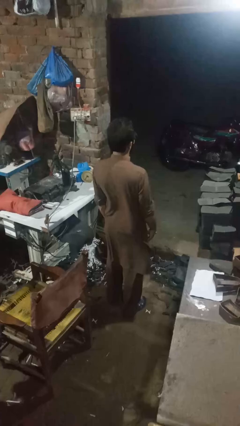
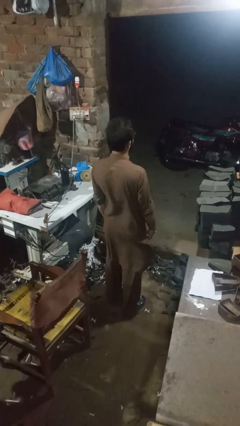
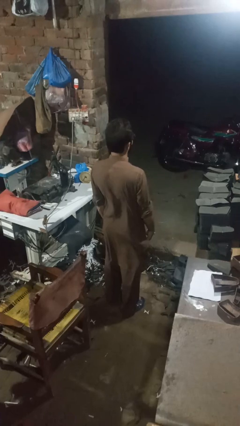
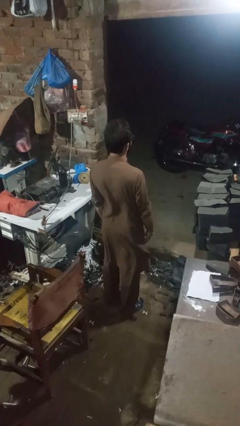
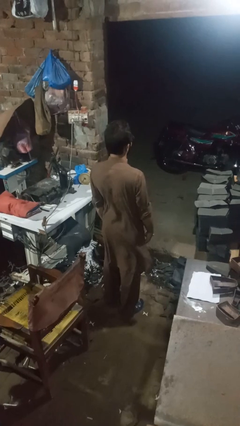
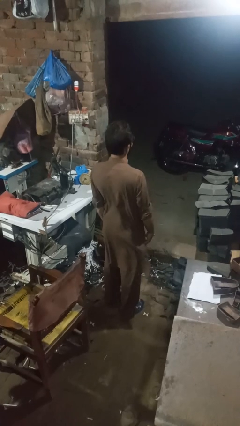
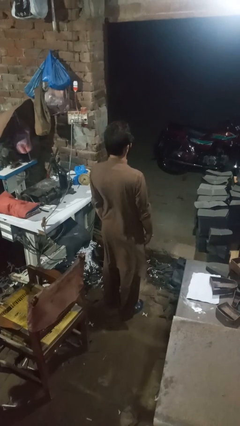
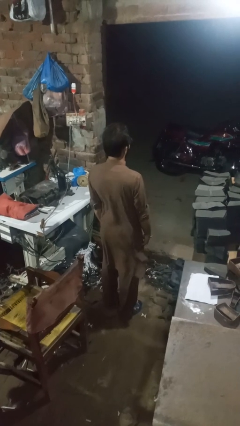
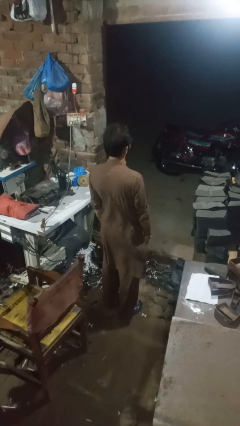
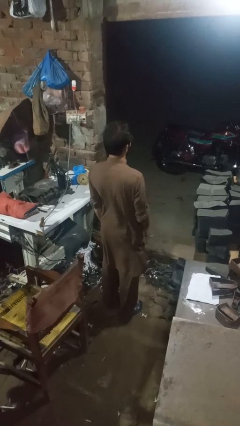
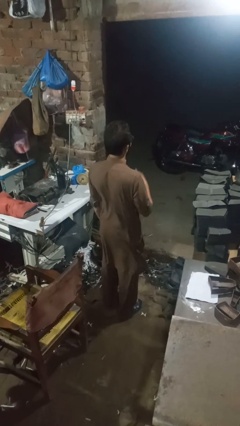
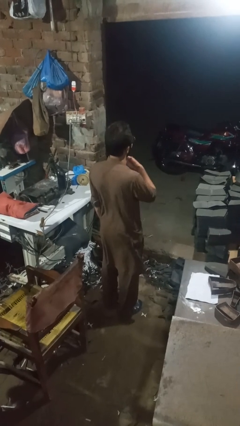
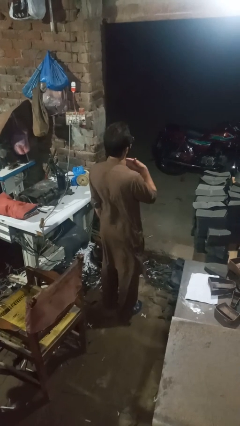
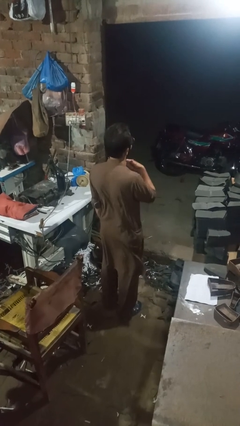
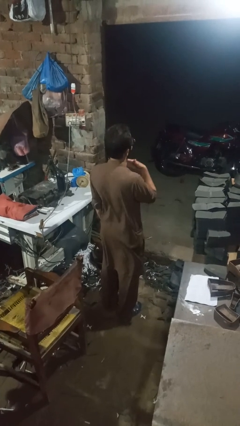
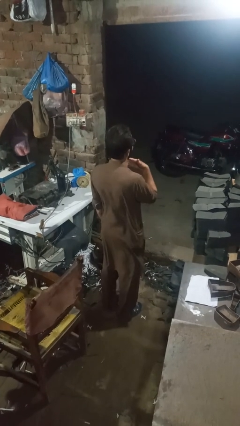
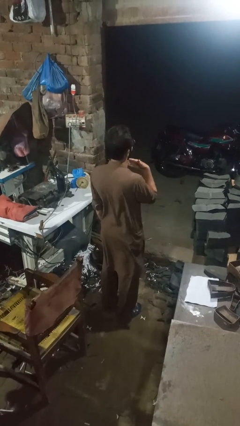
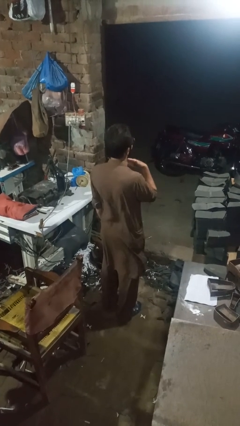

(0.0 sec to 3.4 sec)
person rubs neck

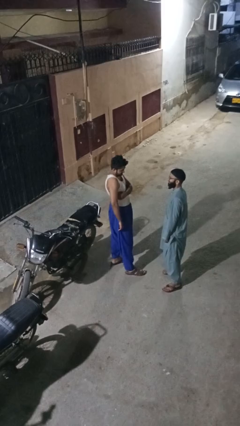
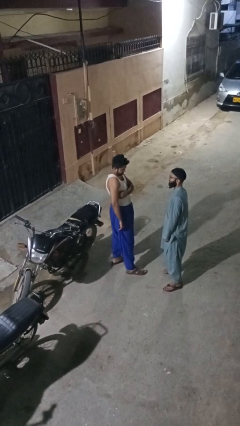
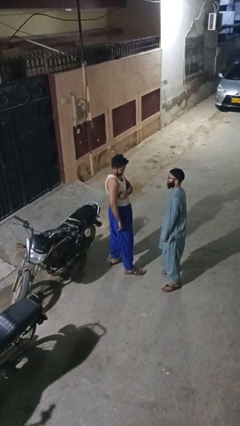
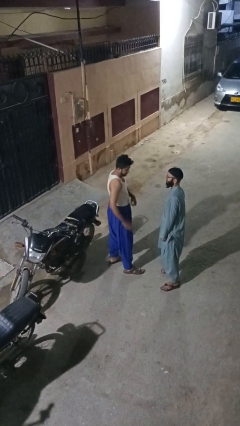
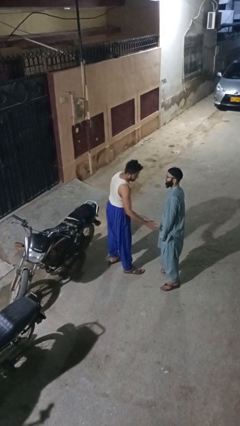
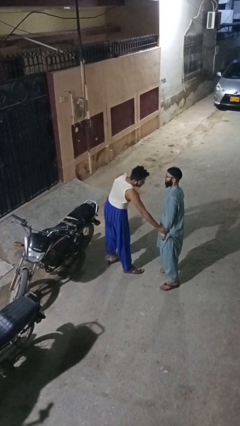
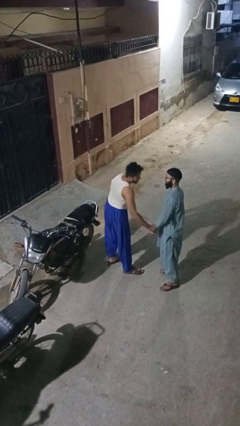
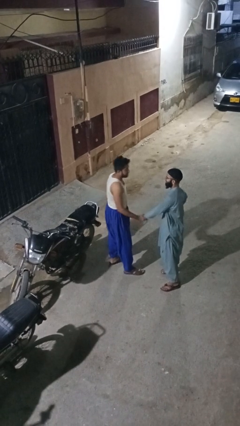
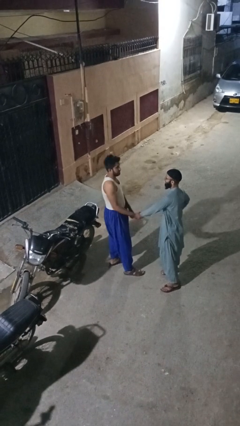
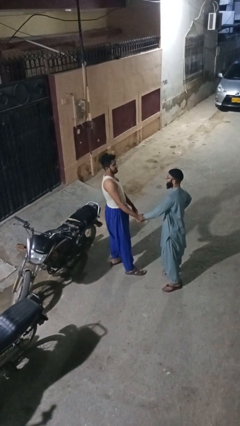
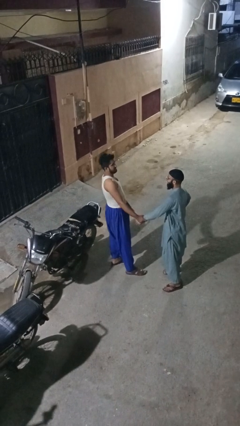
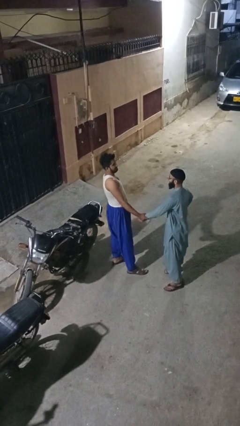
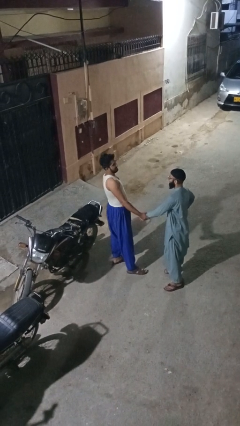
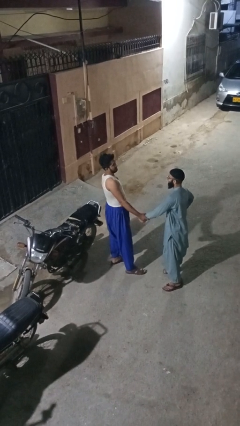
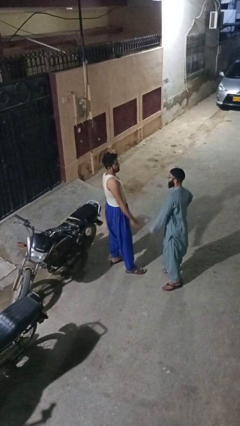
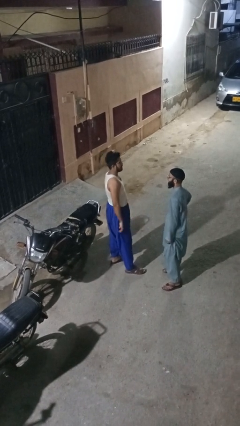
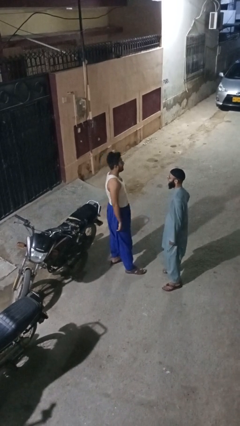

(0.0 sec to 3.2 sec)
person grabs person by forearm

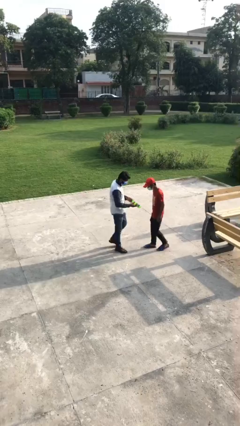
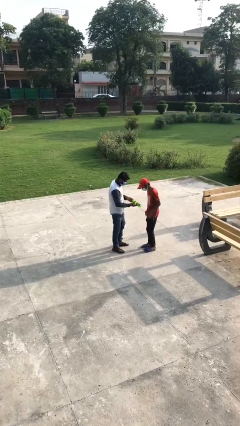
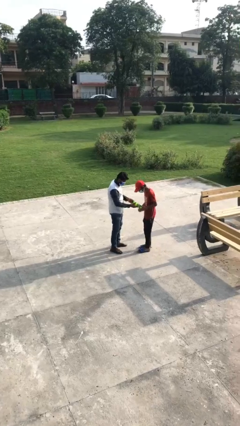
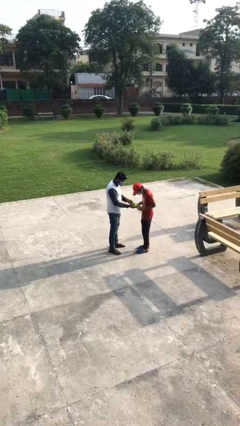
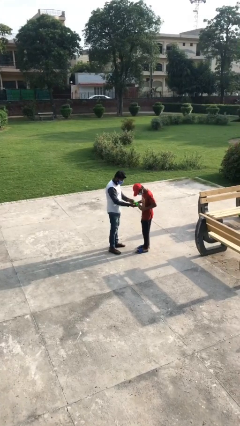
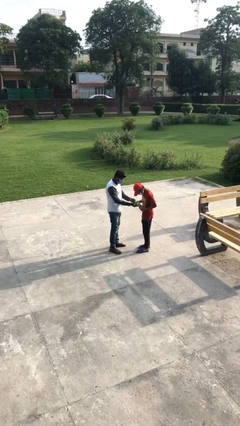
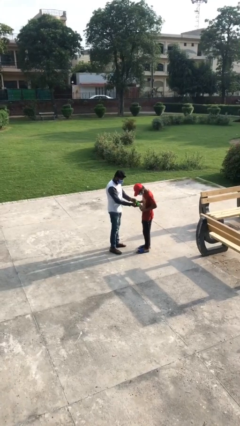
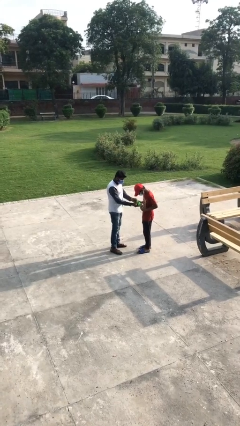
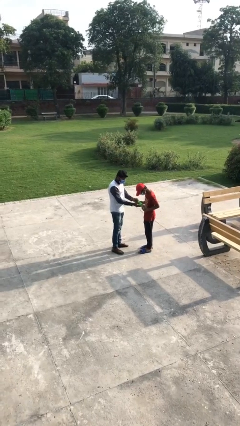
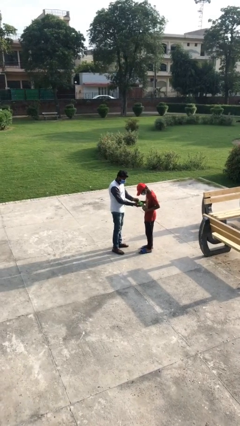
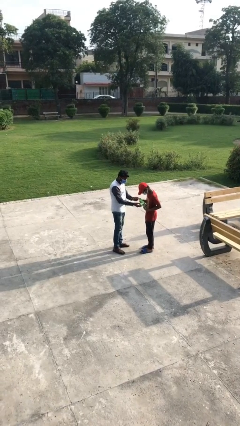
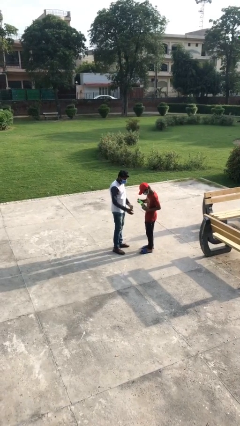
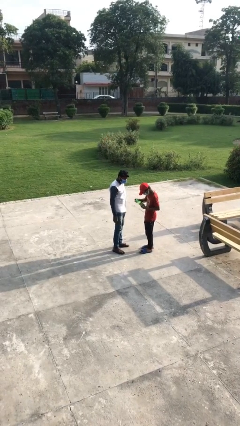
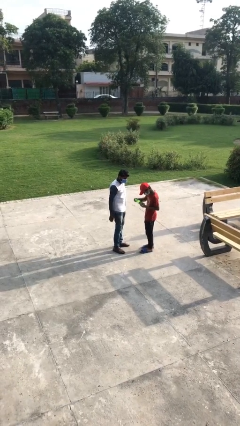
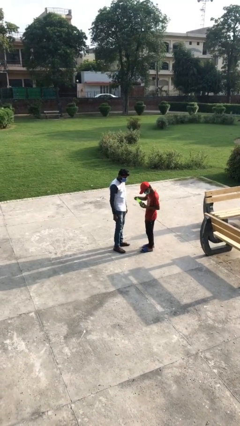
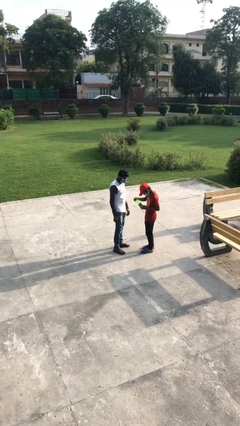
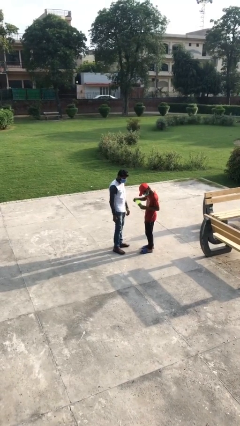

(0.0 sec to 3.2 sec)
person transfers object to person

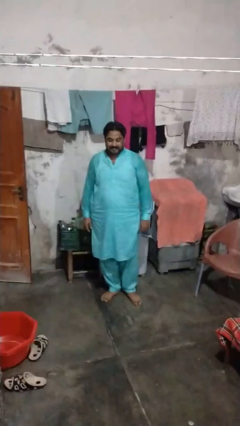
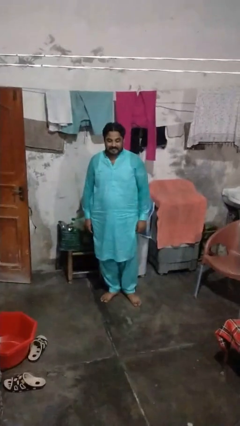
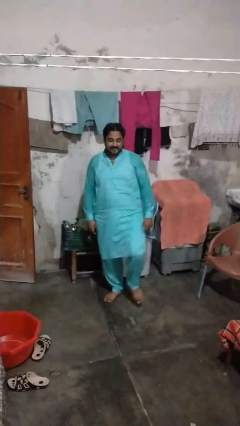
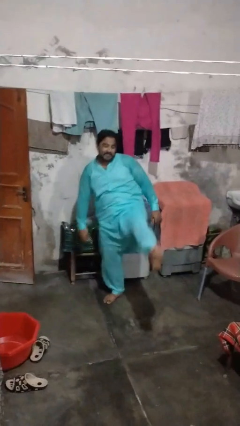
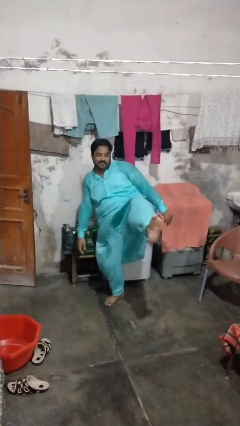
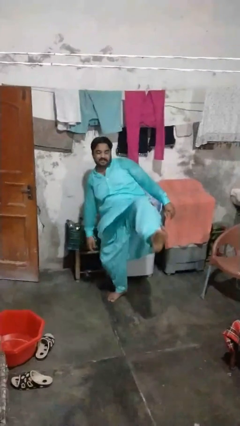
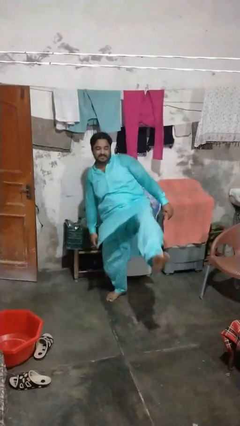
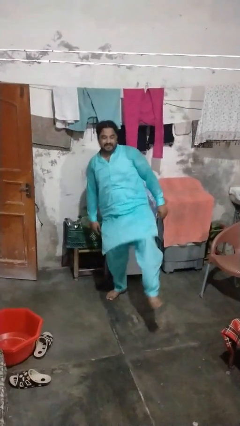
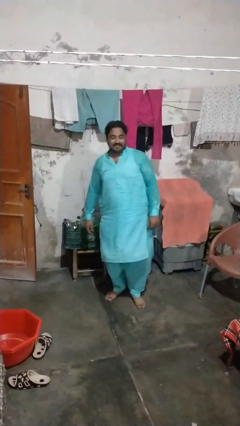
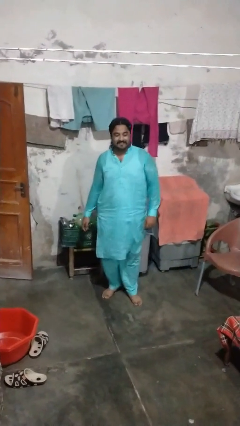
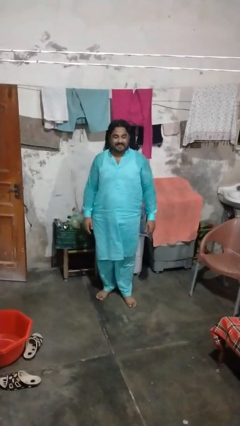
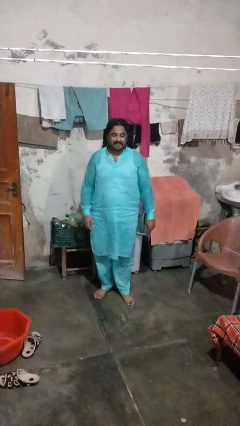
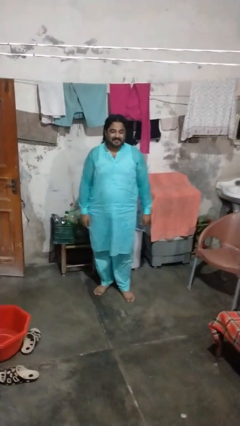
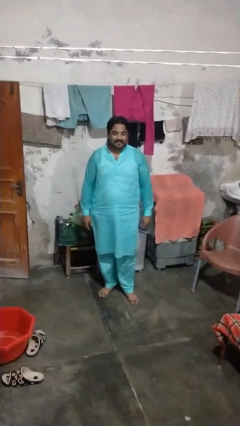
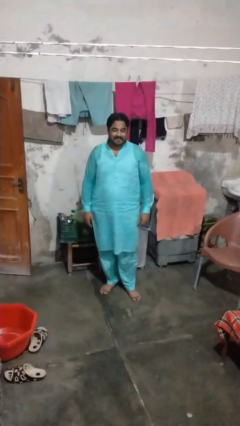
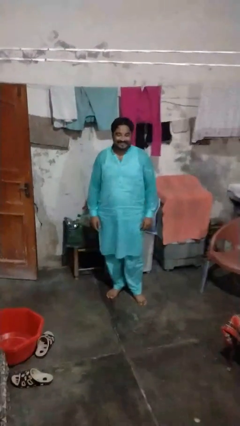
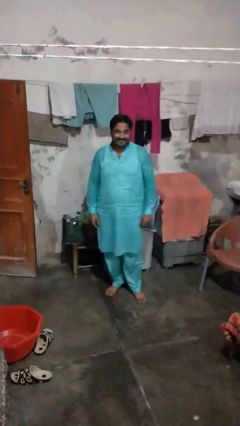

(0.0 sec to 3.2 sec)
person karate kicks

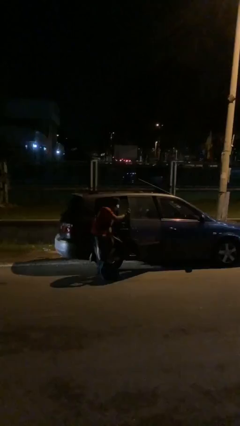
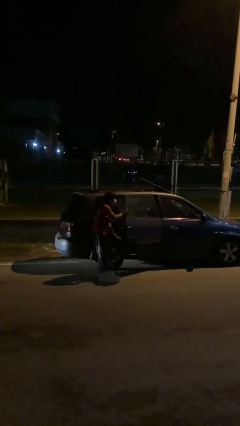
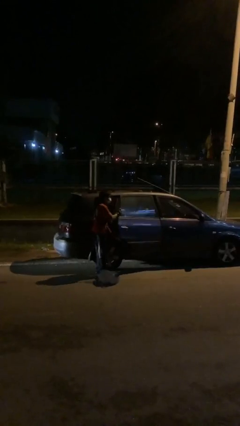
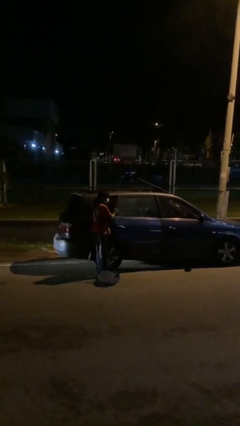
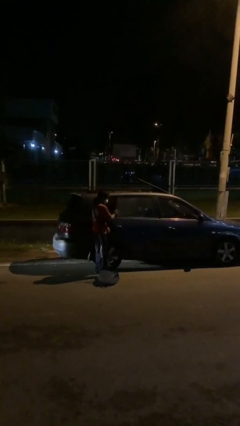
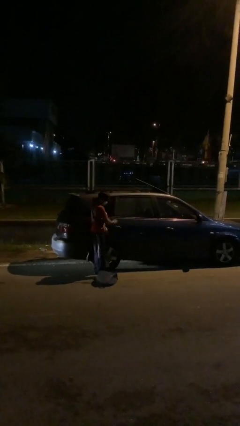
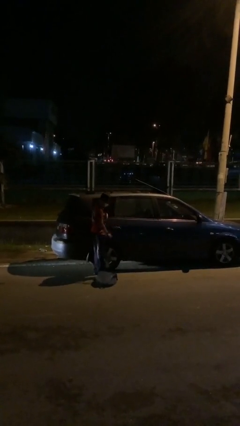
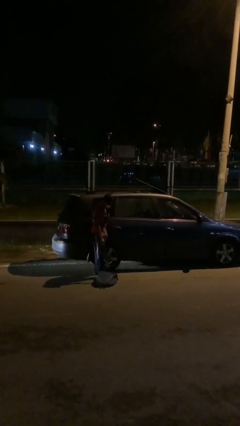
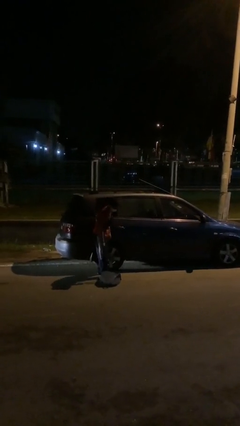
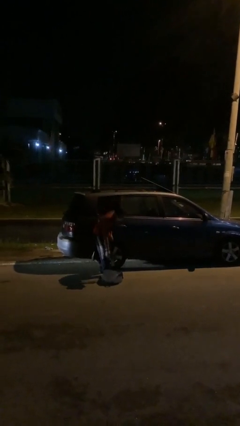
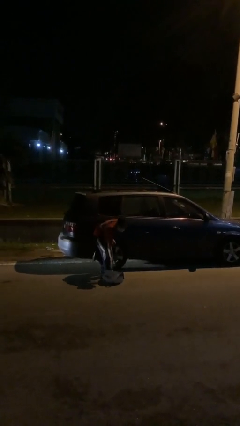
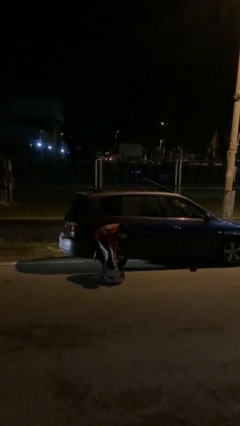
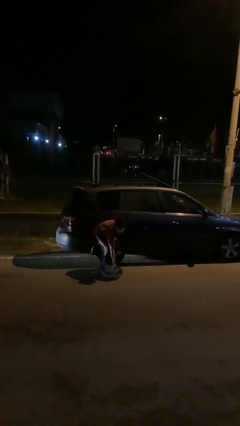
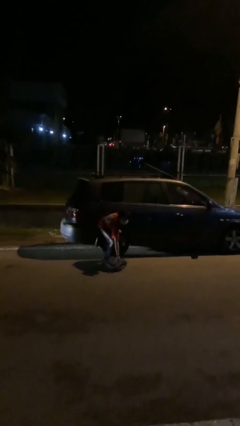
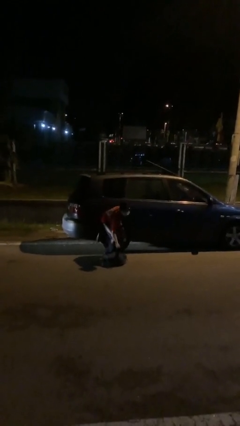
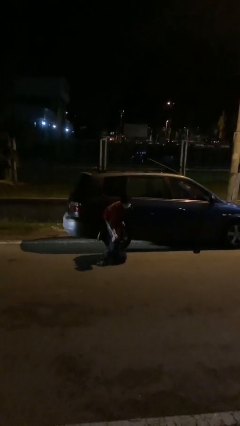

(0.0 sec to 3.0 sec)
person closes car door

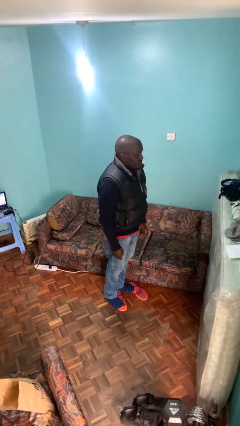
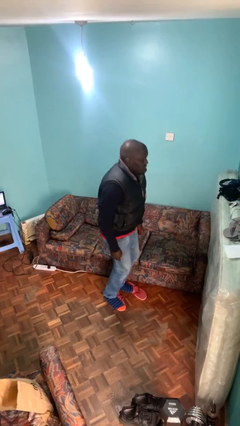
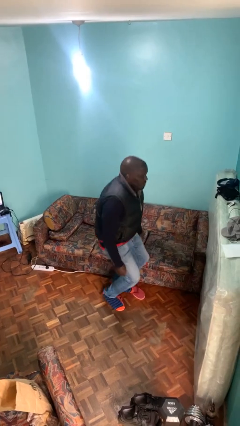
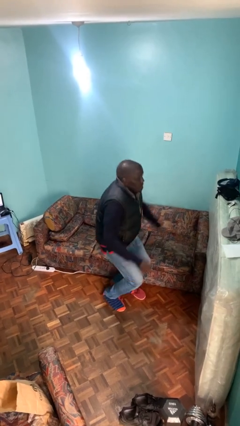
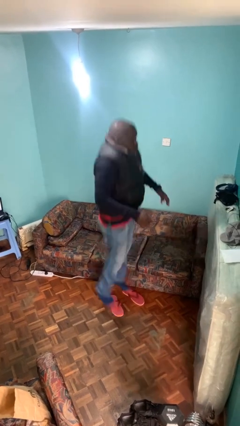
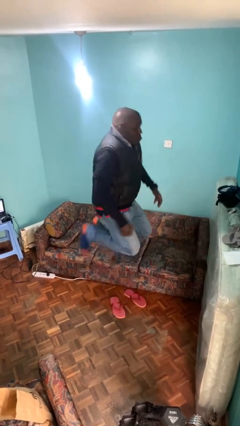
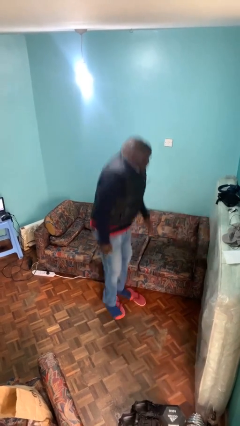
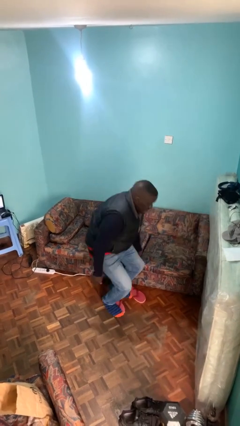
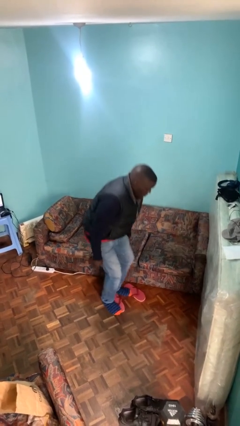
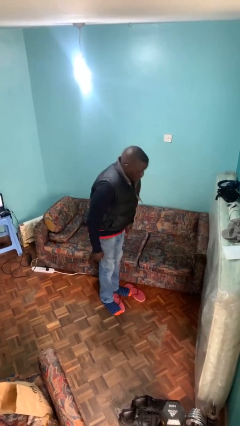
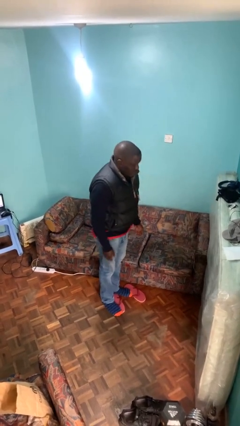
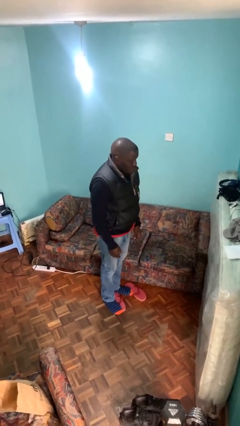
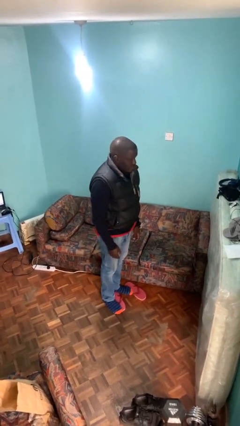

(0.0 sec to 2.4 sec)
person jumps
